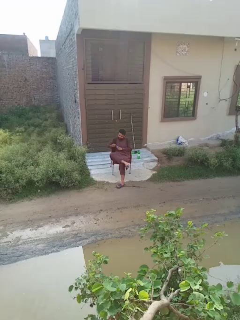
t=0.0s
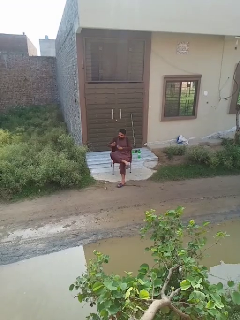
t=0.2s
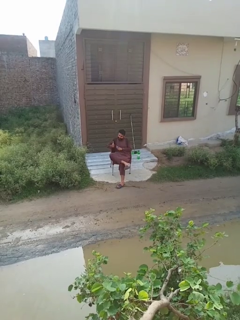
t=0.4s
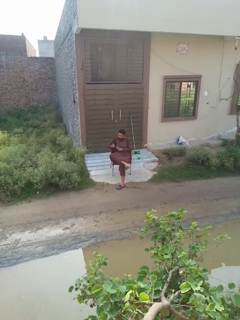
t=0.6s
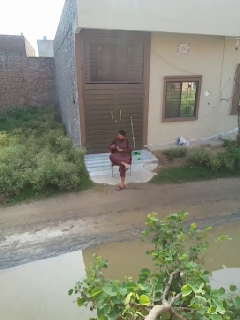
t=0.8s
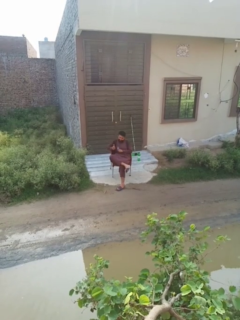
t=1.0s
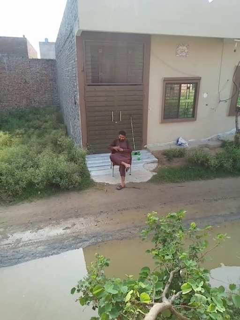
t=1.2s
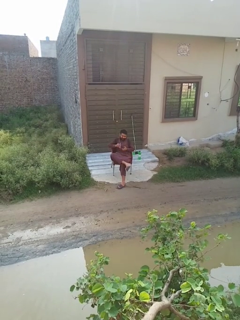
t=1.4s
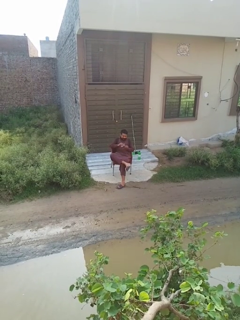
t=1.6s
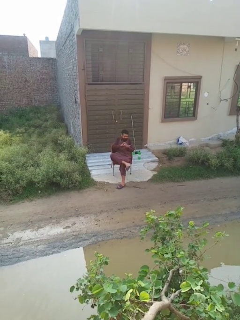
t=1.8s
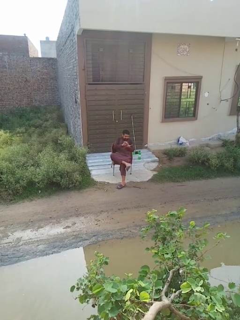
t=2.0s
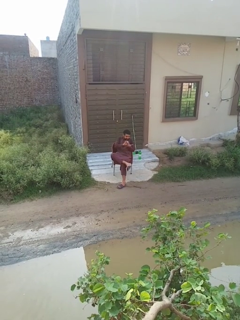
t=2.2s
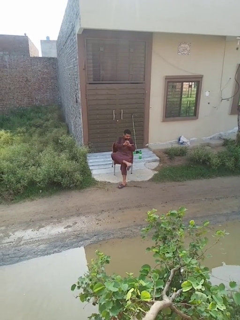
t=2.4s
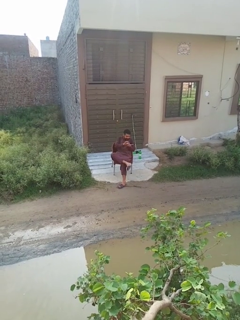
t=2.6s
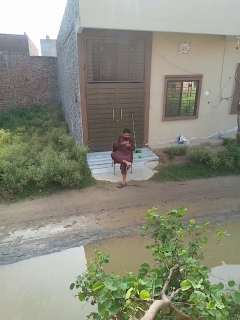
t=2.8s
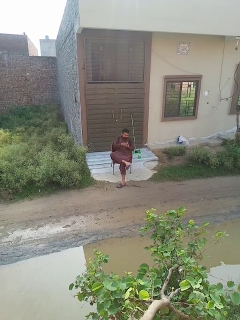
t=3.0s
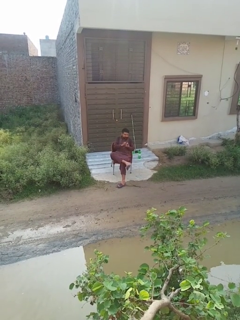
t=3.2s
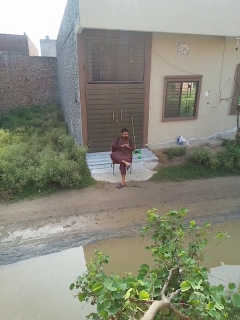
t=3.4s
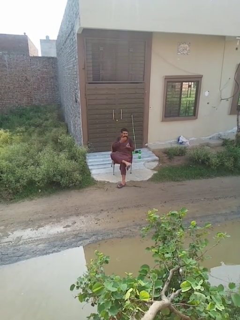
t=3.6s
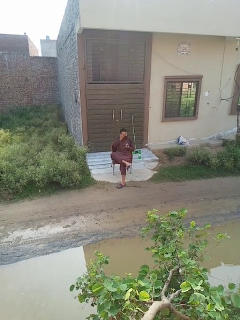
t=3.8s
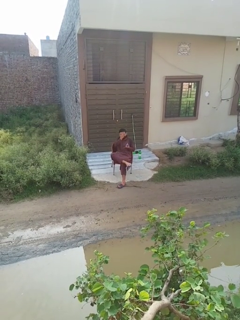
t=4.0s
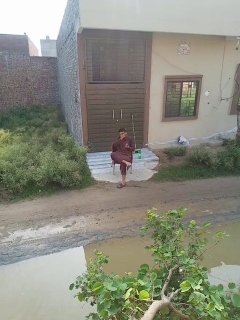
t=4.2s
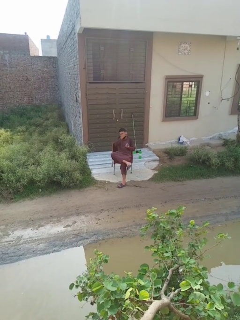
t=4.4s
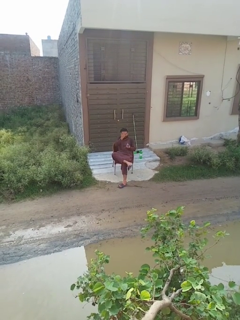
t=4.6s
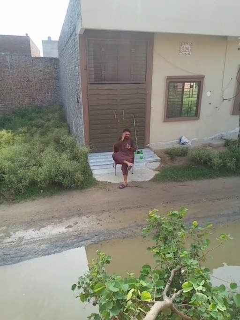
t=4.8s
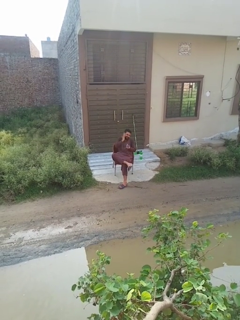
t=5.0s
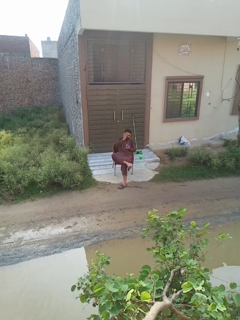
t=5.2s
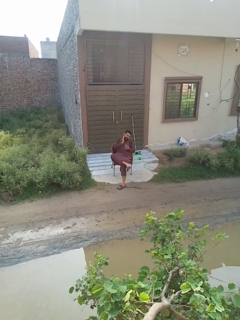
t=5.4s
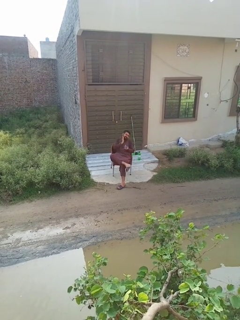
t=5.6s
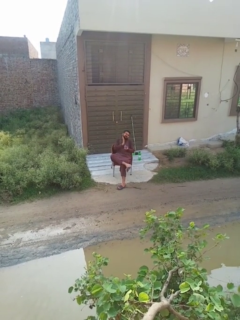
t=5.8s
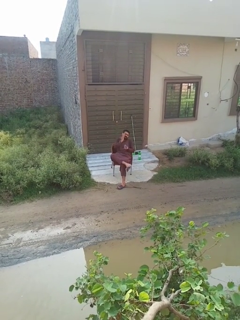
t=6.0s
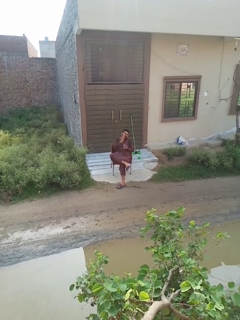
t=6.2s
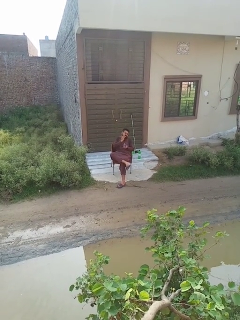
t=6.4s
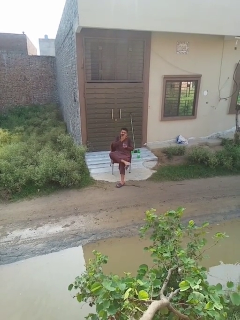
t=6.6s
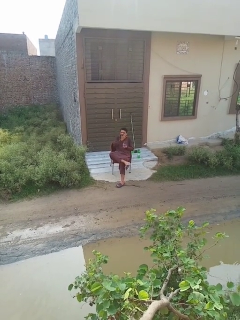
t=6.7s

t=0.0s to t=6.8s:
person applies facial moisturizer

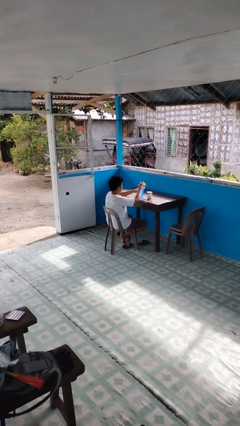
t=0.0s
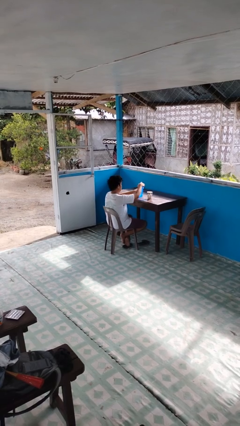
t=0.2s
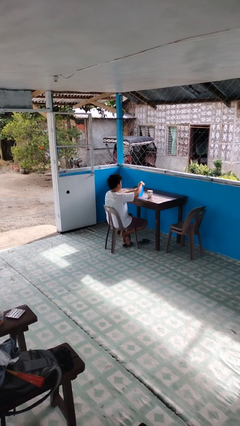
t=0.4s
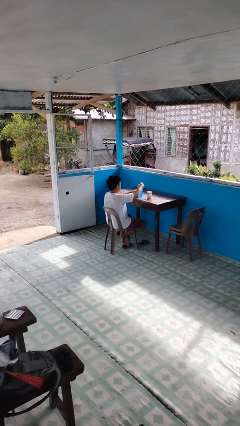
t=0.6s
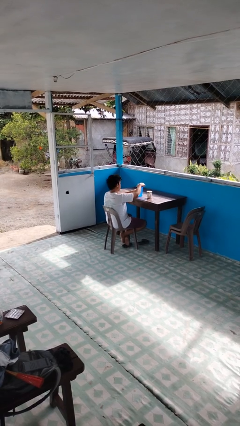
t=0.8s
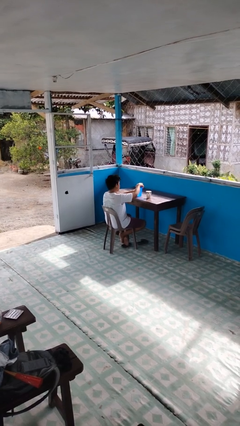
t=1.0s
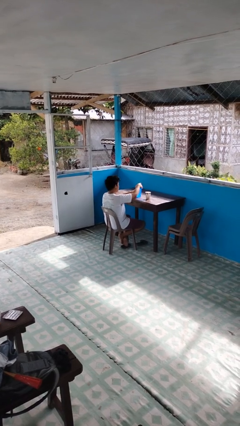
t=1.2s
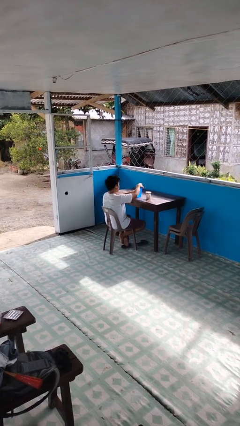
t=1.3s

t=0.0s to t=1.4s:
person screws lid to bottle

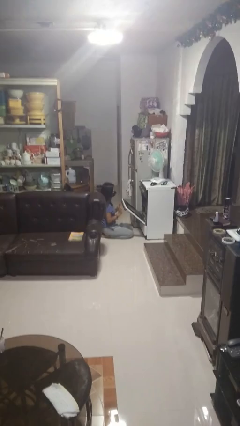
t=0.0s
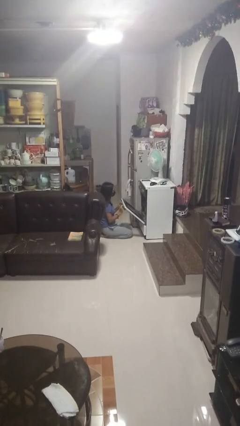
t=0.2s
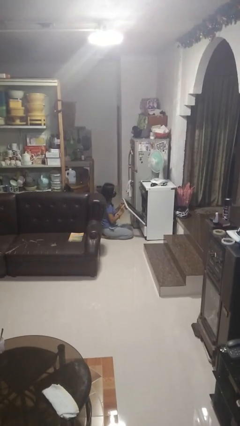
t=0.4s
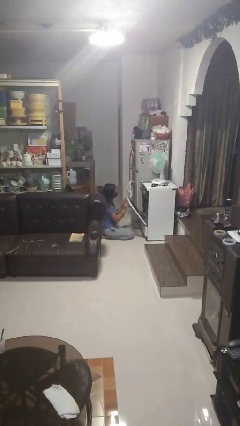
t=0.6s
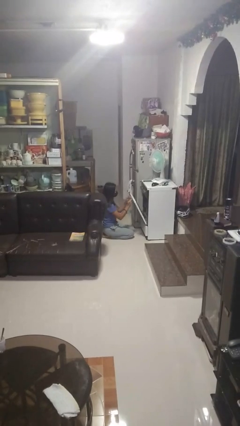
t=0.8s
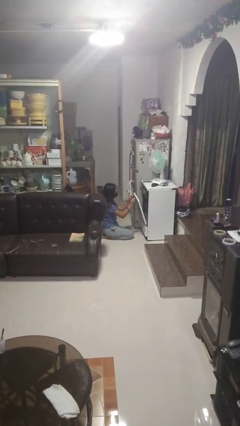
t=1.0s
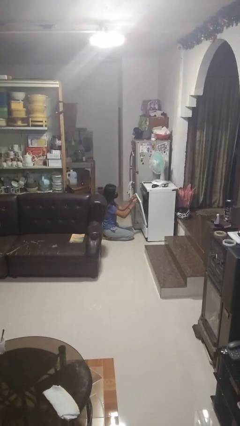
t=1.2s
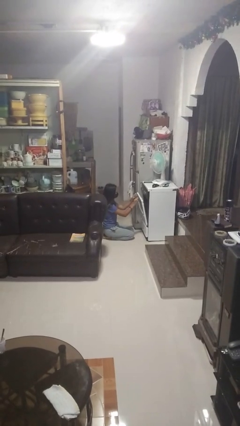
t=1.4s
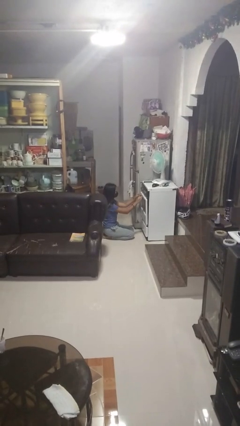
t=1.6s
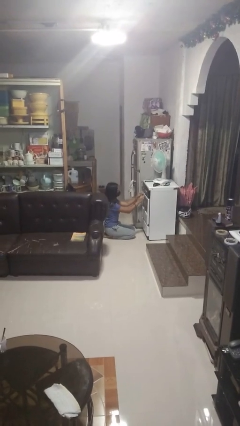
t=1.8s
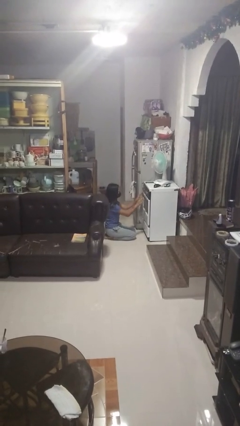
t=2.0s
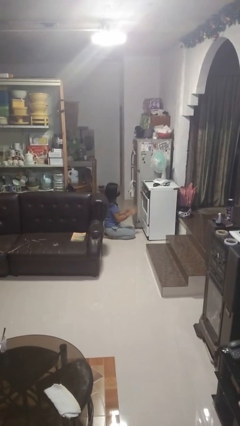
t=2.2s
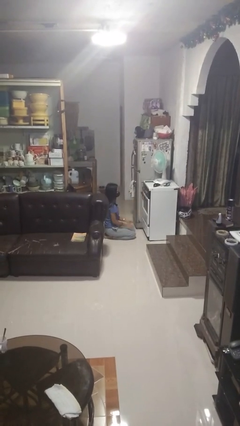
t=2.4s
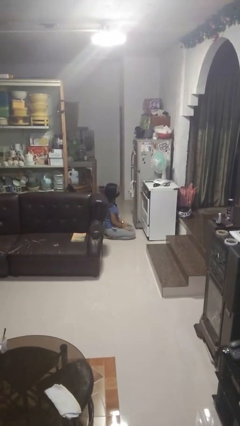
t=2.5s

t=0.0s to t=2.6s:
person closes oven door

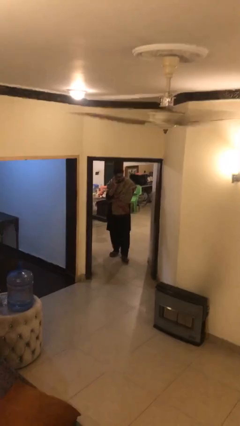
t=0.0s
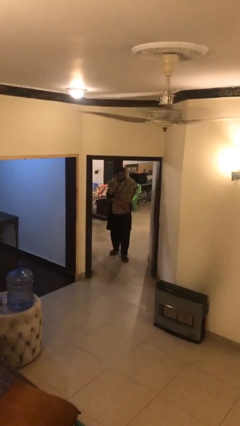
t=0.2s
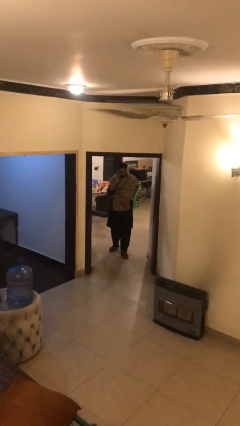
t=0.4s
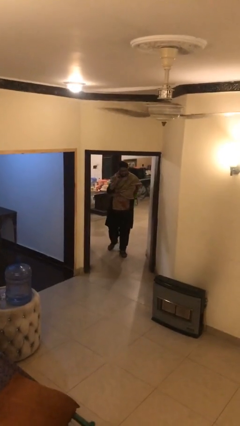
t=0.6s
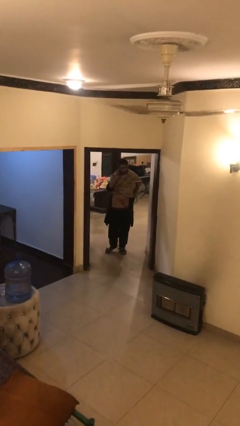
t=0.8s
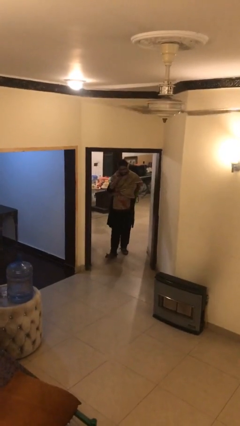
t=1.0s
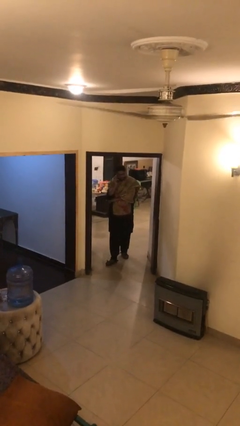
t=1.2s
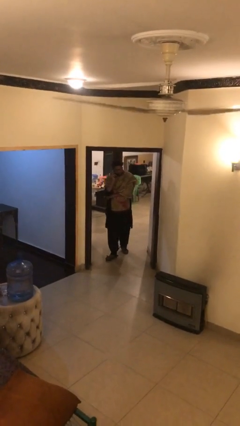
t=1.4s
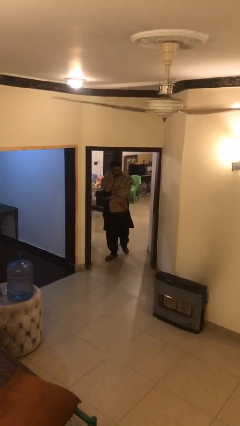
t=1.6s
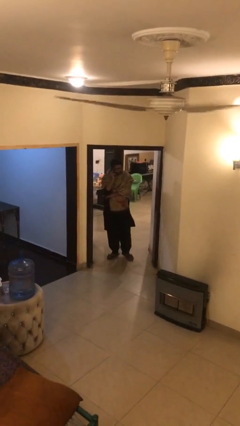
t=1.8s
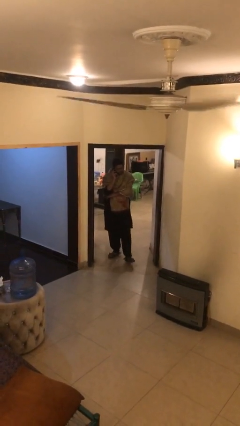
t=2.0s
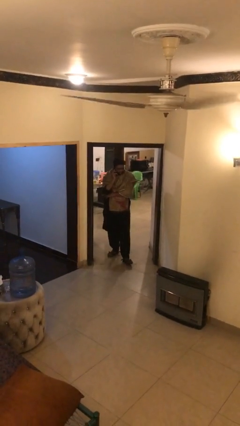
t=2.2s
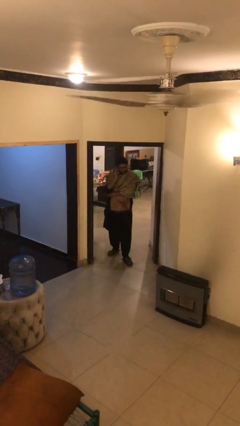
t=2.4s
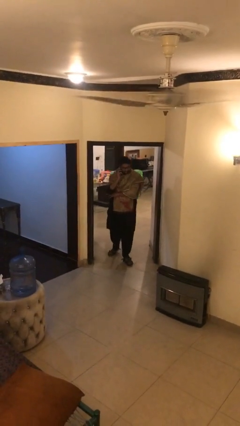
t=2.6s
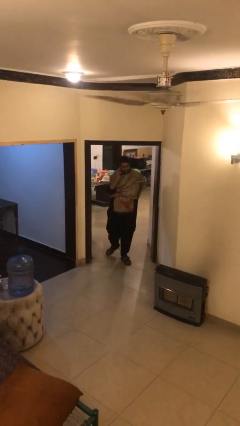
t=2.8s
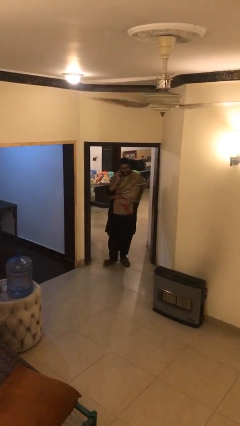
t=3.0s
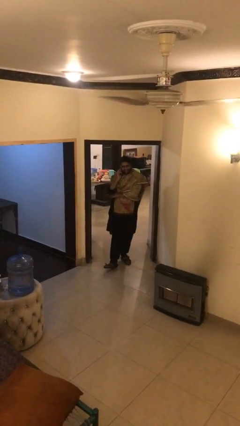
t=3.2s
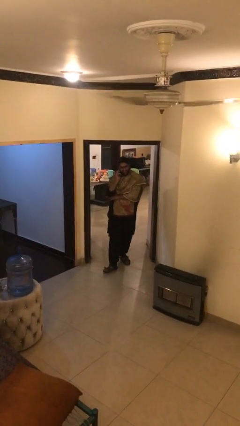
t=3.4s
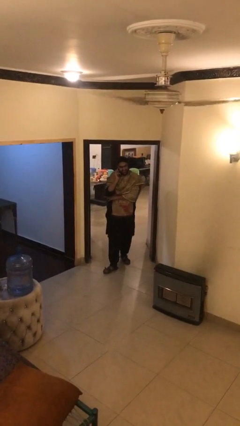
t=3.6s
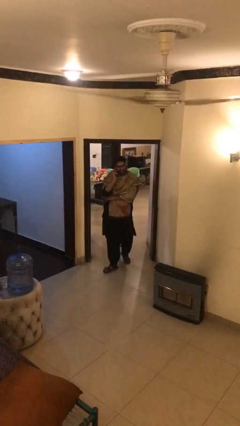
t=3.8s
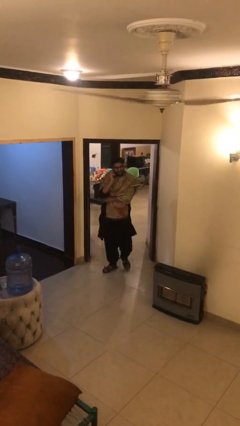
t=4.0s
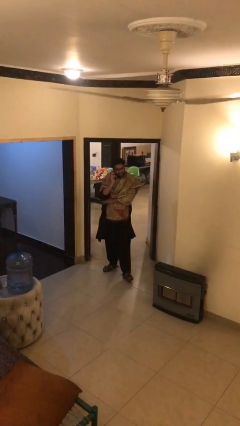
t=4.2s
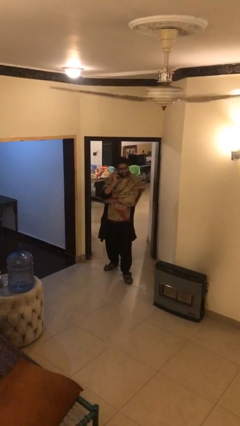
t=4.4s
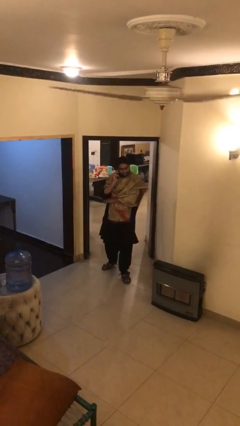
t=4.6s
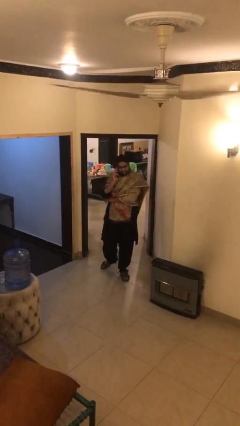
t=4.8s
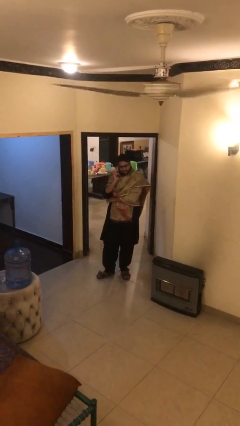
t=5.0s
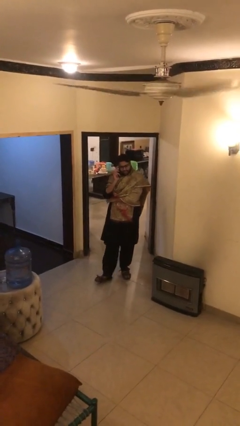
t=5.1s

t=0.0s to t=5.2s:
person enters scene through structure

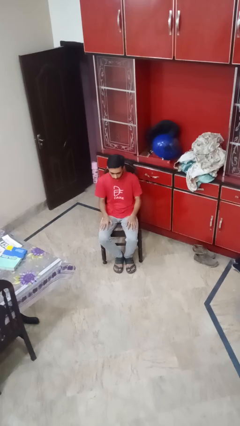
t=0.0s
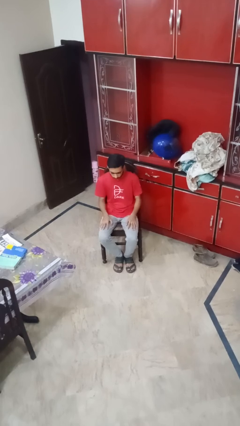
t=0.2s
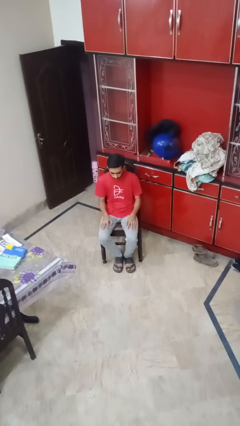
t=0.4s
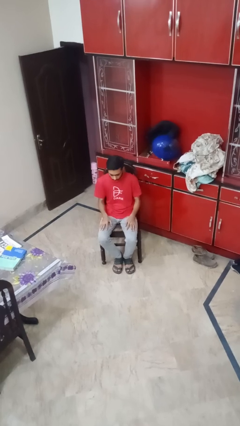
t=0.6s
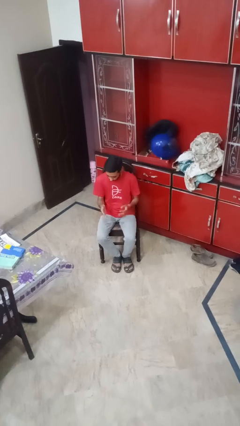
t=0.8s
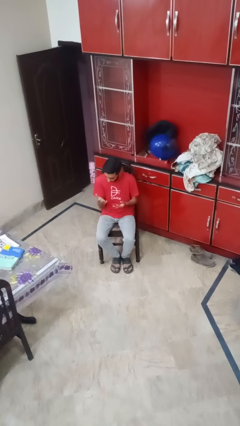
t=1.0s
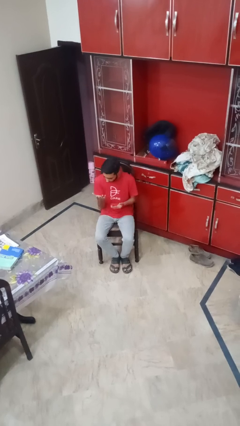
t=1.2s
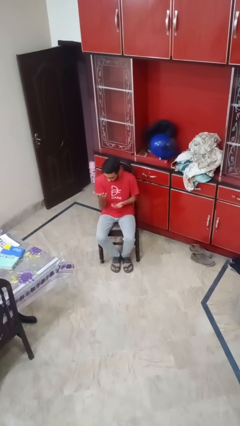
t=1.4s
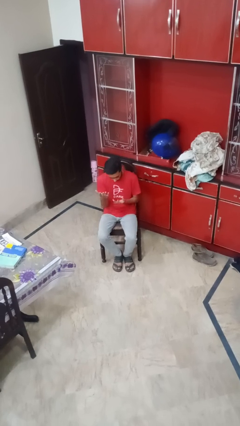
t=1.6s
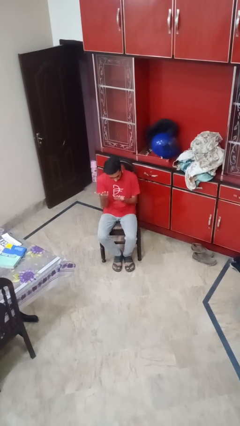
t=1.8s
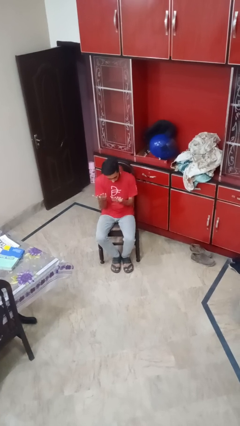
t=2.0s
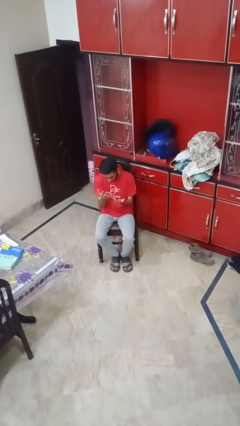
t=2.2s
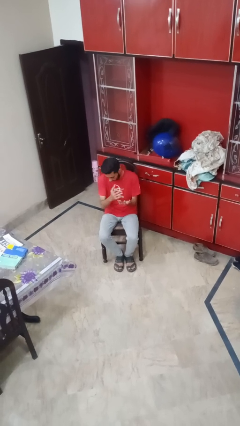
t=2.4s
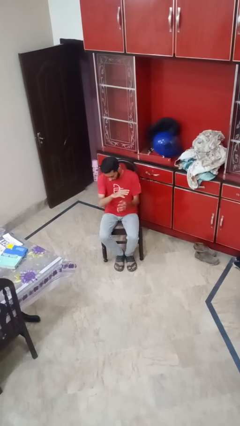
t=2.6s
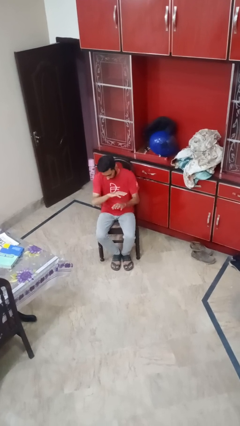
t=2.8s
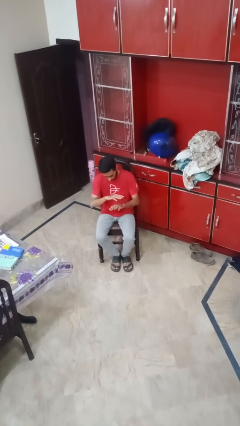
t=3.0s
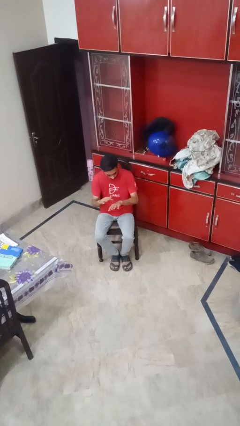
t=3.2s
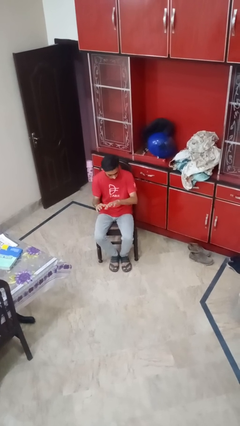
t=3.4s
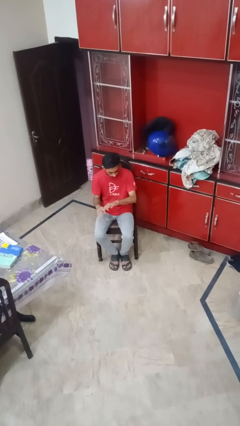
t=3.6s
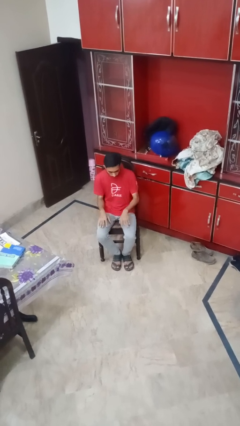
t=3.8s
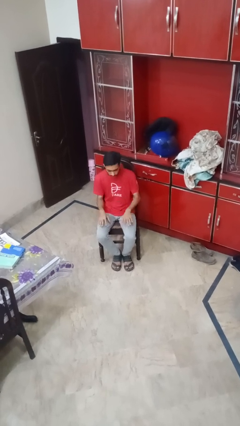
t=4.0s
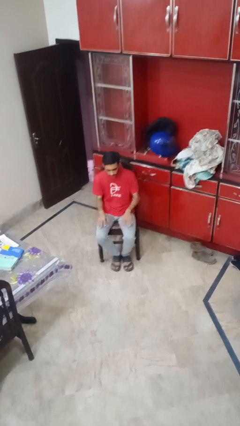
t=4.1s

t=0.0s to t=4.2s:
person looks at hands in lap
